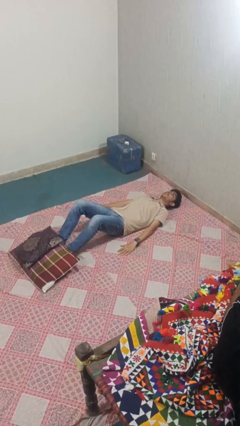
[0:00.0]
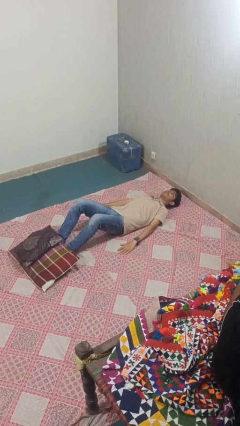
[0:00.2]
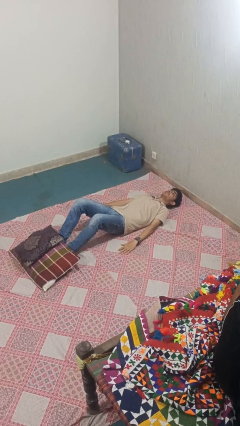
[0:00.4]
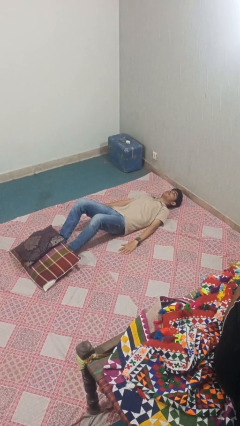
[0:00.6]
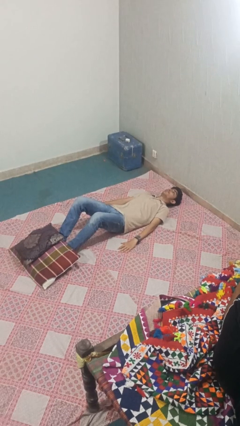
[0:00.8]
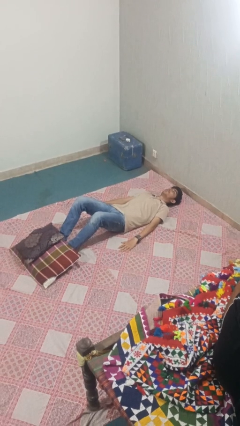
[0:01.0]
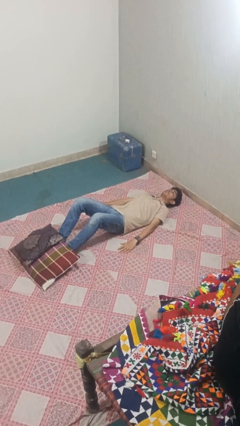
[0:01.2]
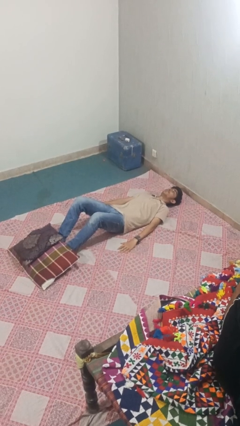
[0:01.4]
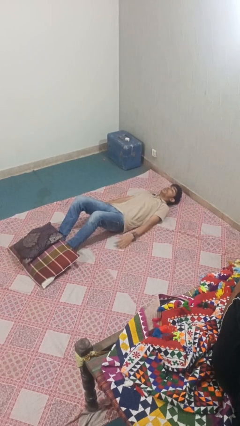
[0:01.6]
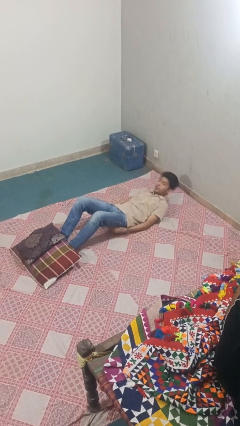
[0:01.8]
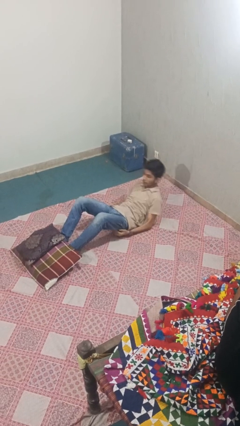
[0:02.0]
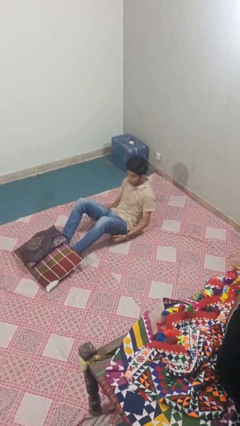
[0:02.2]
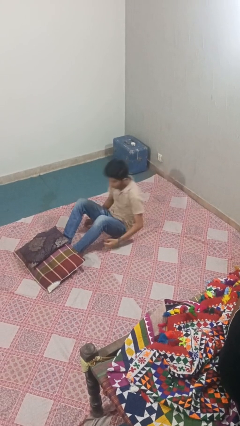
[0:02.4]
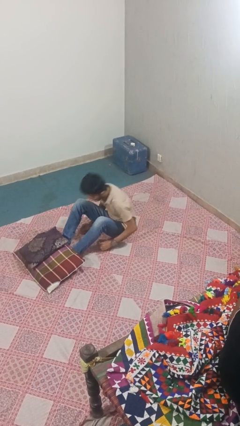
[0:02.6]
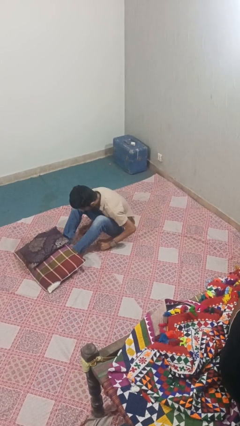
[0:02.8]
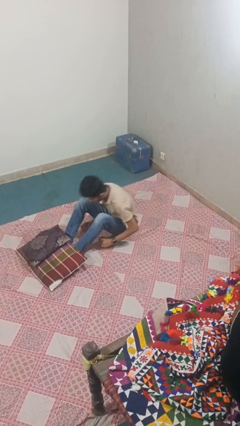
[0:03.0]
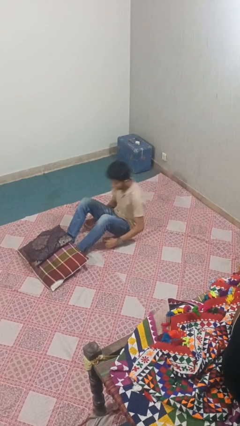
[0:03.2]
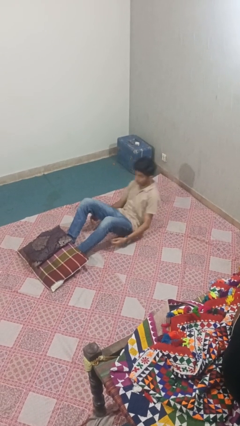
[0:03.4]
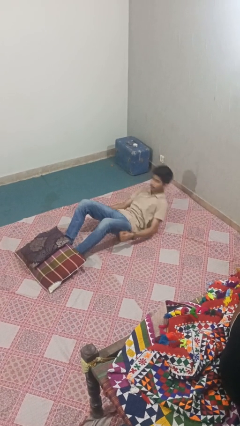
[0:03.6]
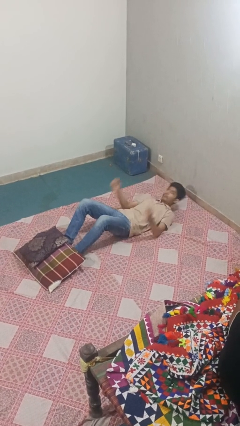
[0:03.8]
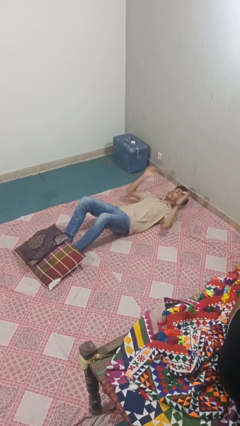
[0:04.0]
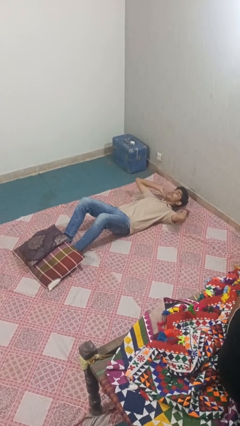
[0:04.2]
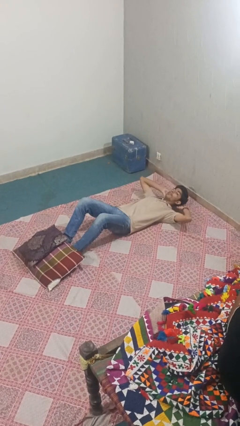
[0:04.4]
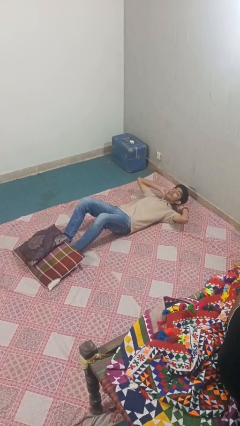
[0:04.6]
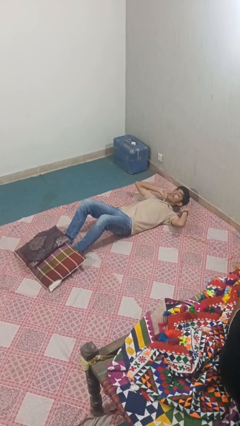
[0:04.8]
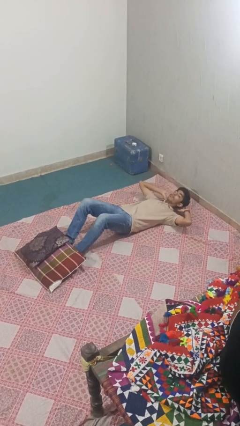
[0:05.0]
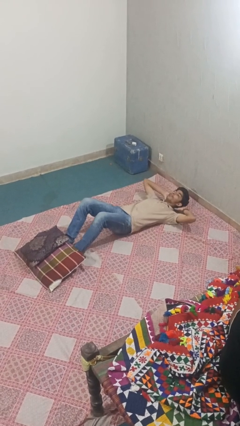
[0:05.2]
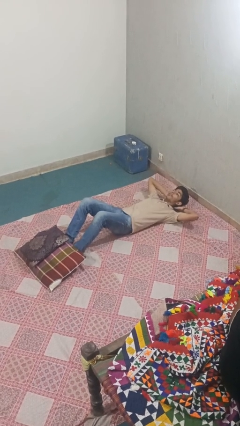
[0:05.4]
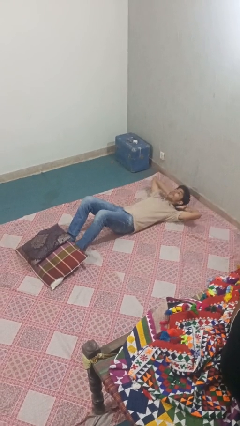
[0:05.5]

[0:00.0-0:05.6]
person exercises with situp

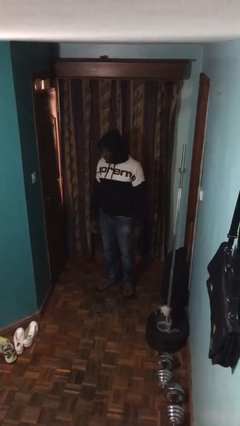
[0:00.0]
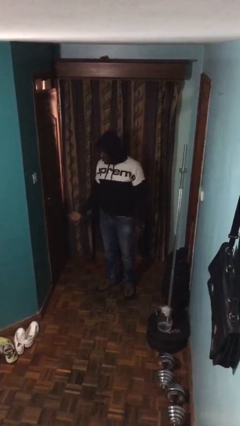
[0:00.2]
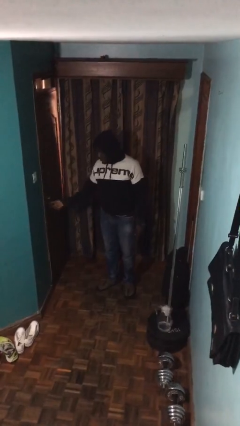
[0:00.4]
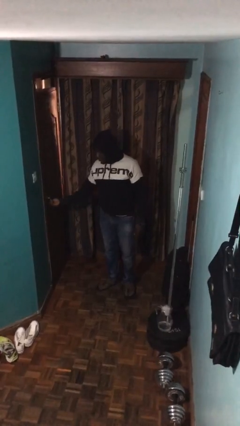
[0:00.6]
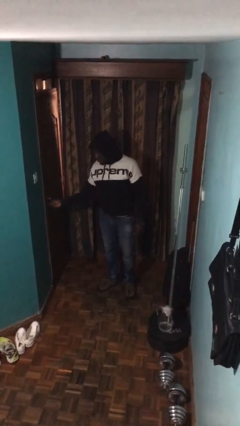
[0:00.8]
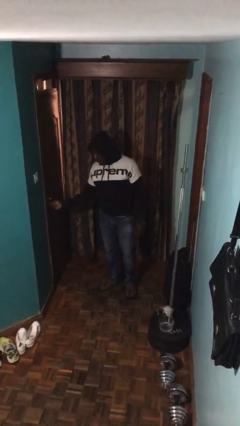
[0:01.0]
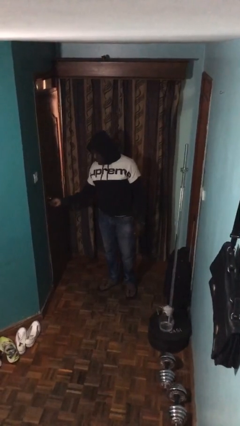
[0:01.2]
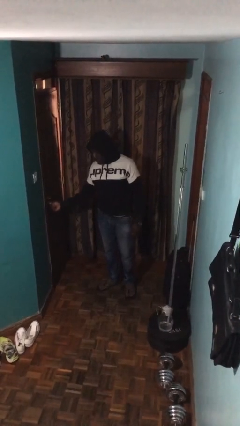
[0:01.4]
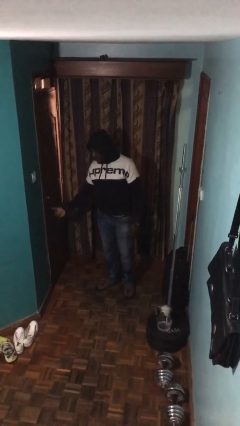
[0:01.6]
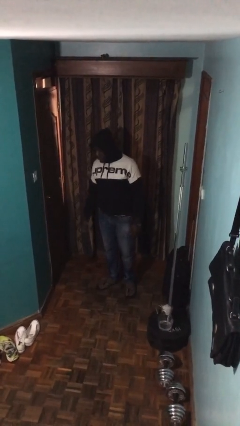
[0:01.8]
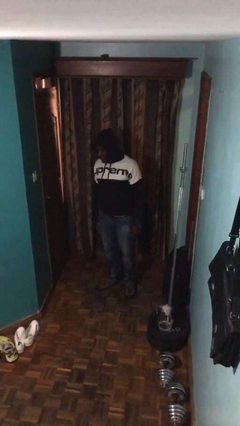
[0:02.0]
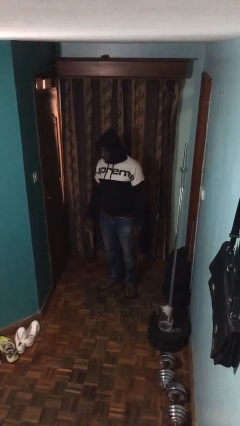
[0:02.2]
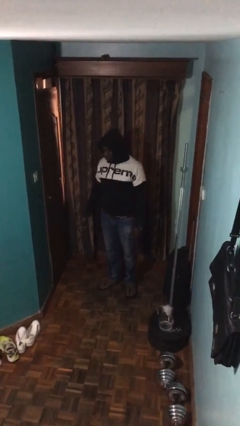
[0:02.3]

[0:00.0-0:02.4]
person locks door with keys

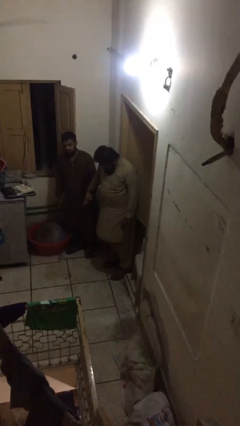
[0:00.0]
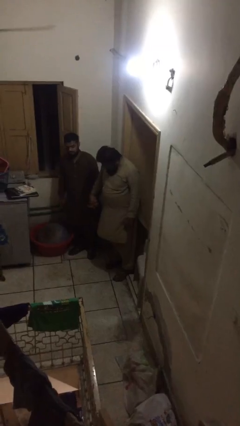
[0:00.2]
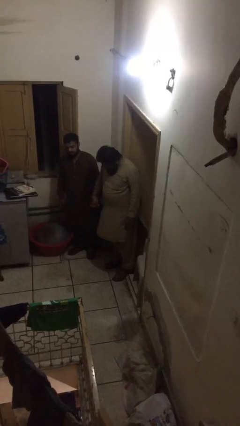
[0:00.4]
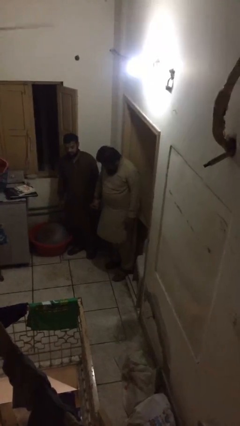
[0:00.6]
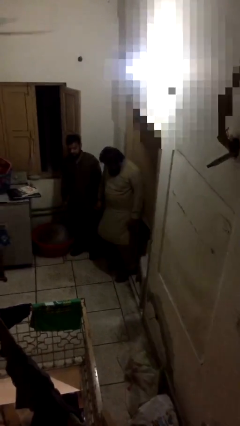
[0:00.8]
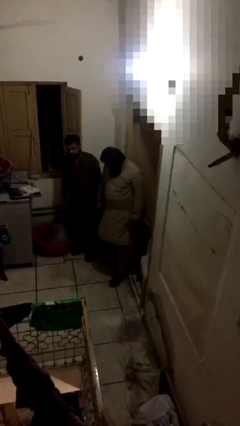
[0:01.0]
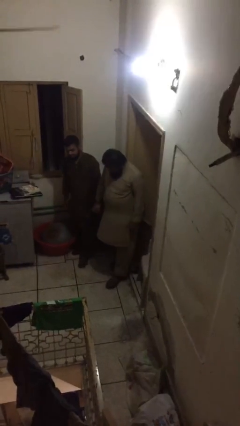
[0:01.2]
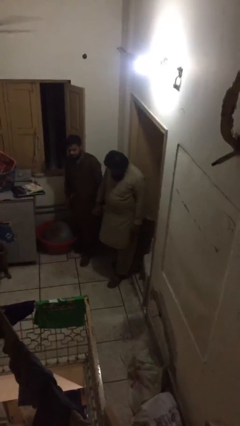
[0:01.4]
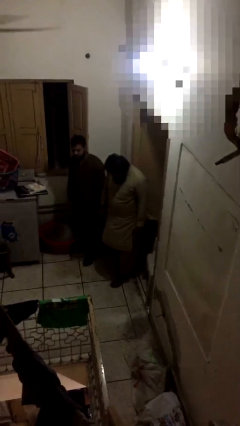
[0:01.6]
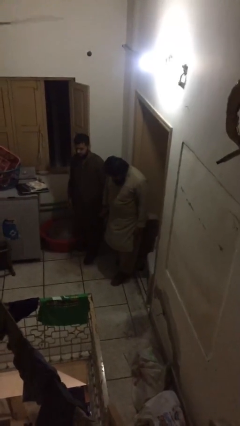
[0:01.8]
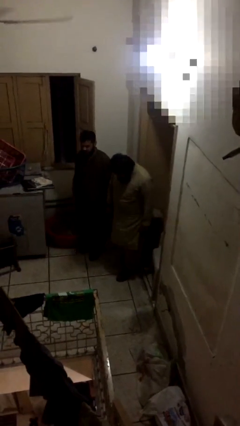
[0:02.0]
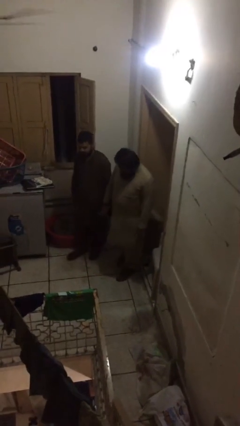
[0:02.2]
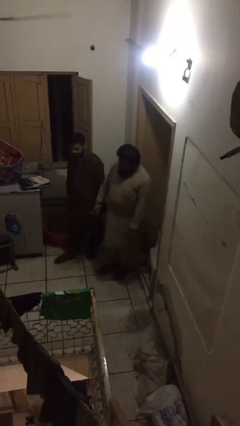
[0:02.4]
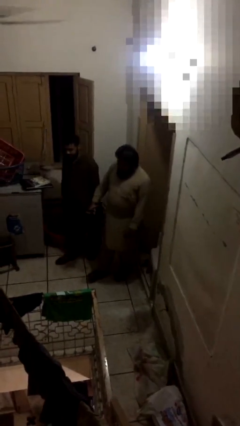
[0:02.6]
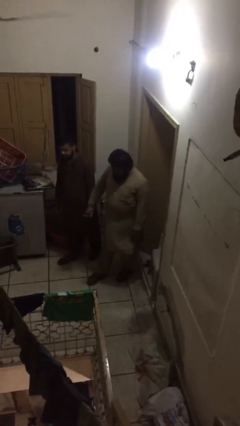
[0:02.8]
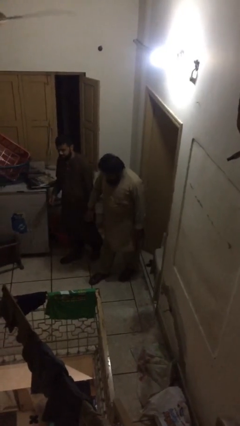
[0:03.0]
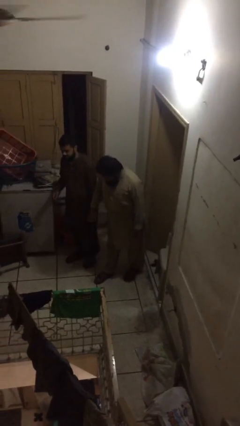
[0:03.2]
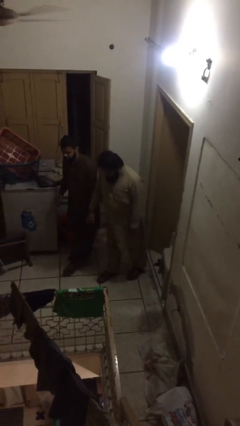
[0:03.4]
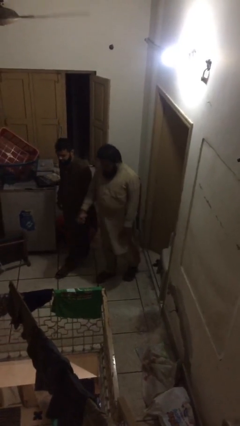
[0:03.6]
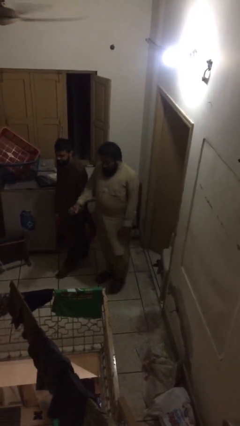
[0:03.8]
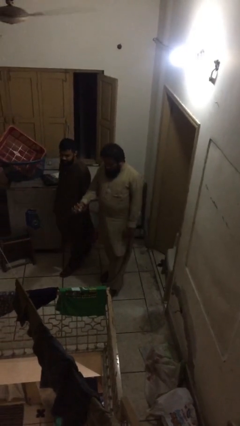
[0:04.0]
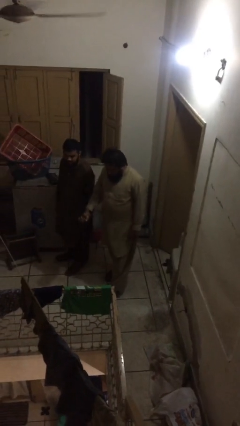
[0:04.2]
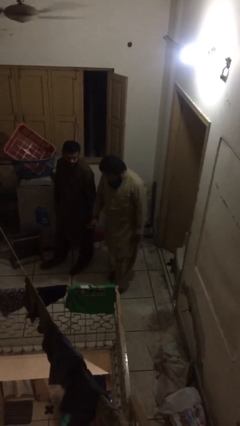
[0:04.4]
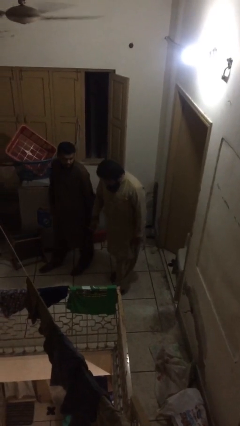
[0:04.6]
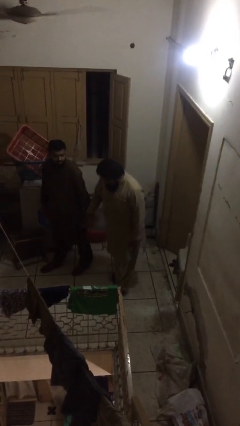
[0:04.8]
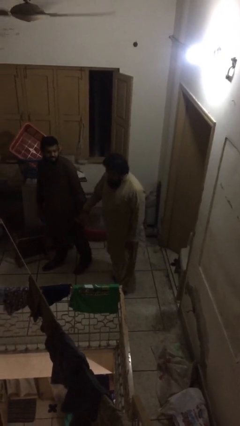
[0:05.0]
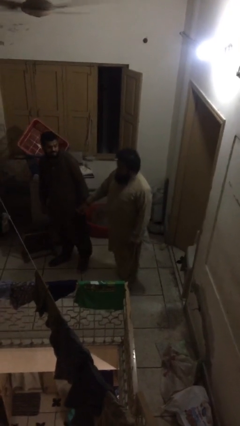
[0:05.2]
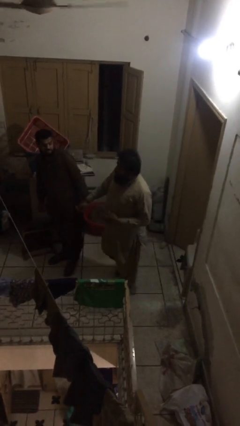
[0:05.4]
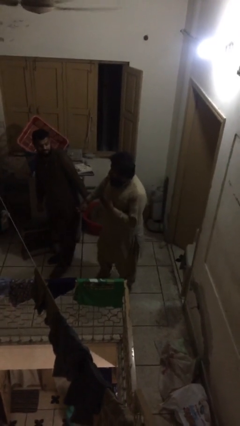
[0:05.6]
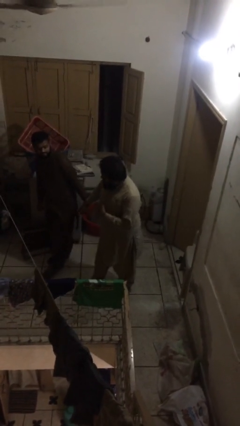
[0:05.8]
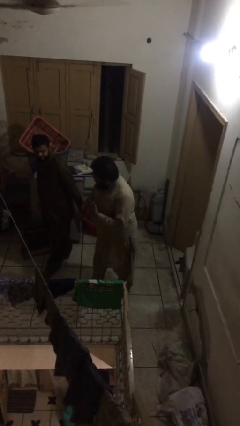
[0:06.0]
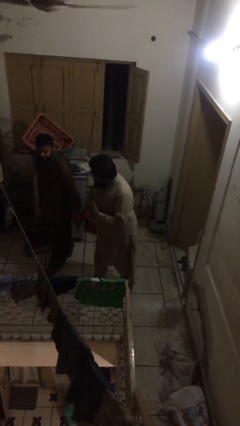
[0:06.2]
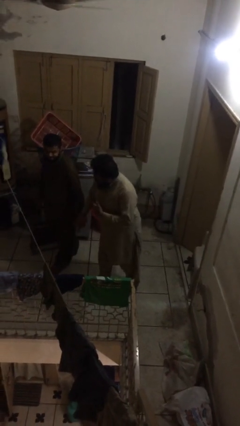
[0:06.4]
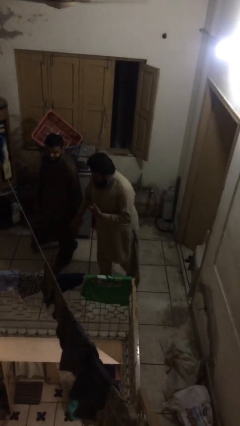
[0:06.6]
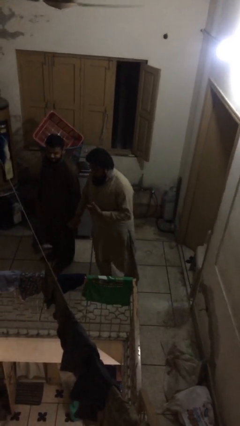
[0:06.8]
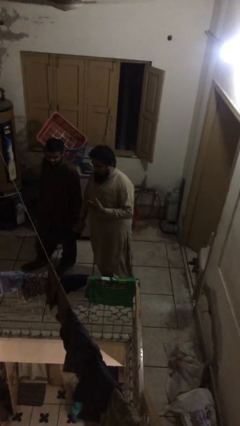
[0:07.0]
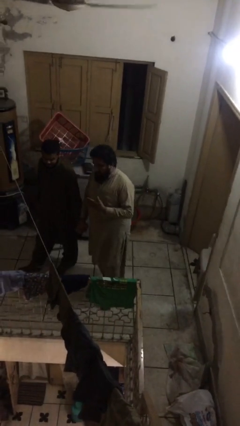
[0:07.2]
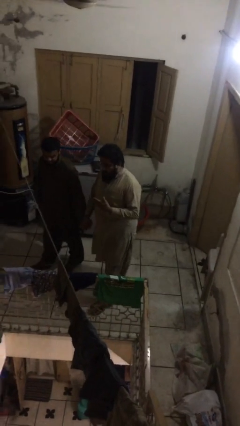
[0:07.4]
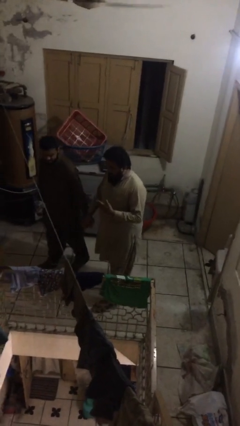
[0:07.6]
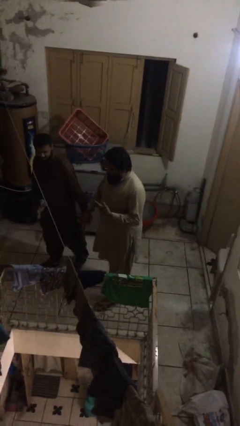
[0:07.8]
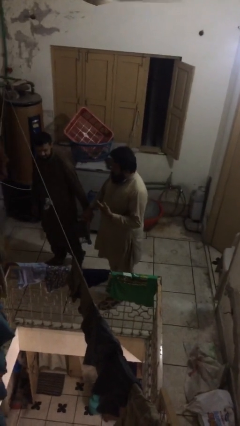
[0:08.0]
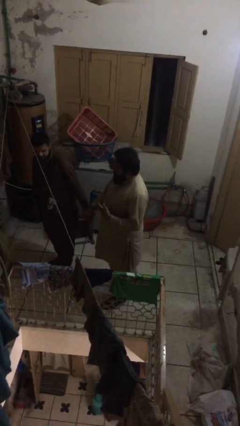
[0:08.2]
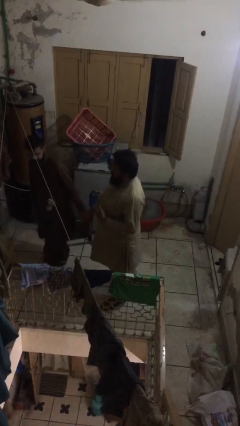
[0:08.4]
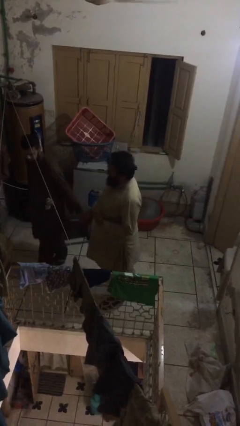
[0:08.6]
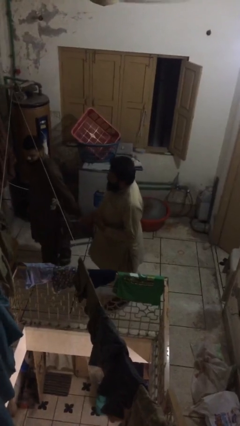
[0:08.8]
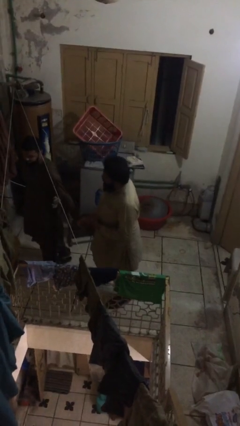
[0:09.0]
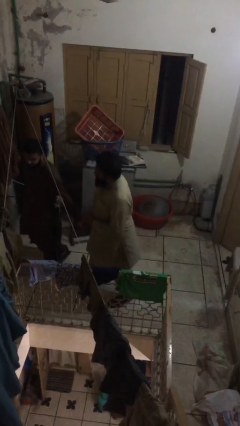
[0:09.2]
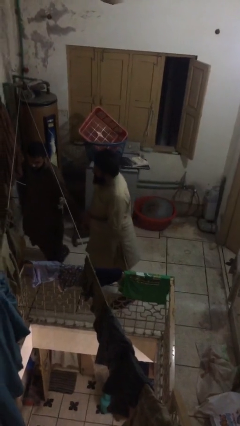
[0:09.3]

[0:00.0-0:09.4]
person holds hand
